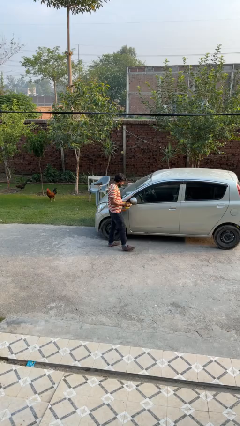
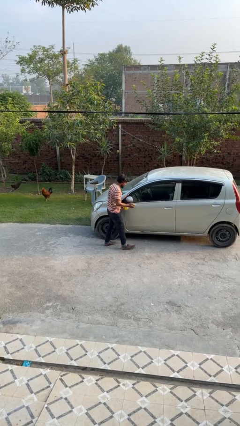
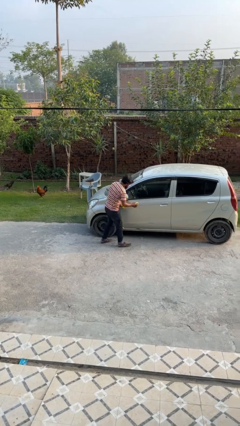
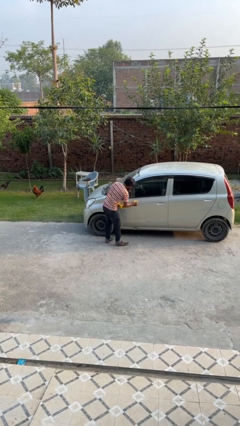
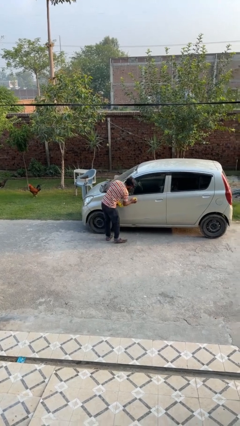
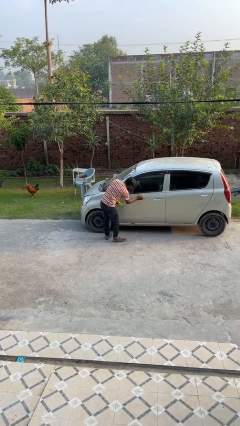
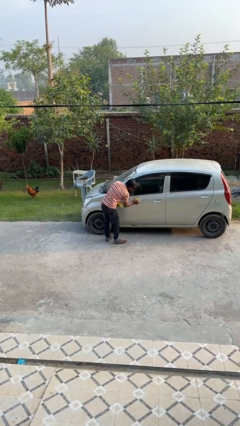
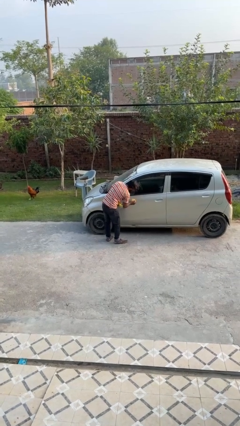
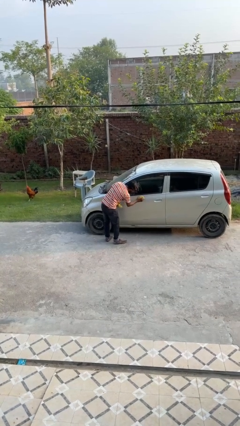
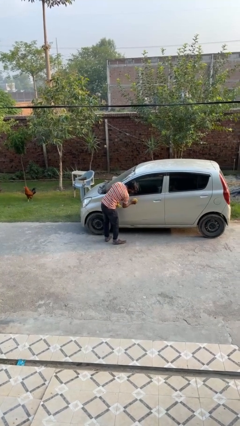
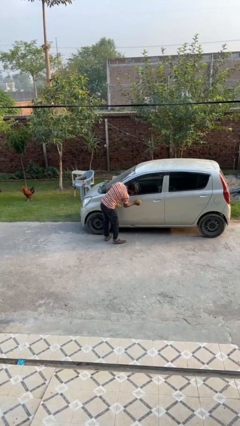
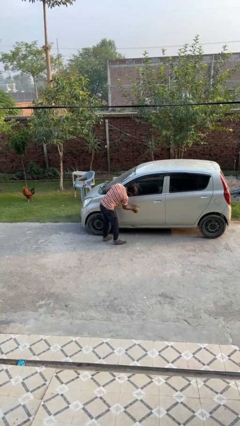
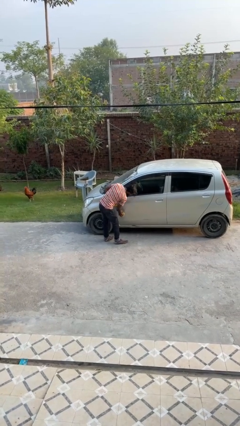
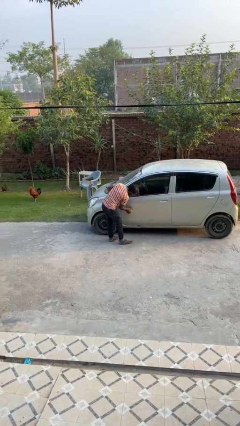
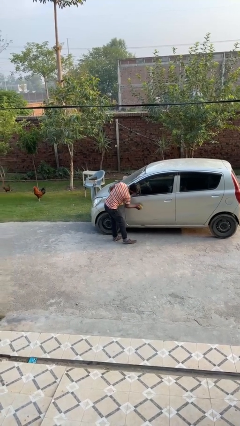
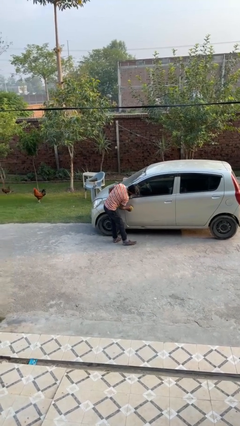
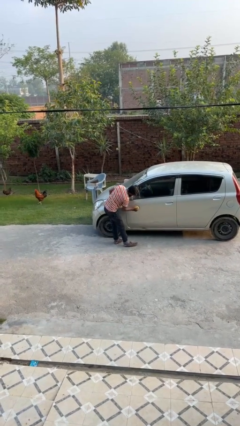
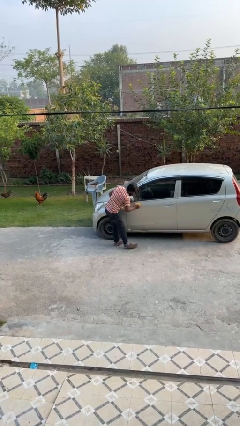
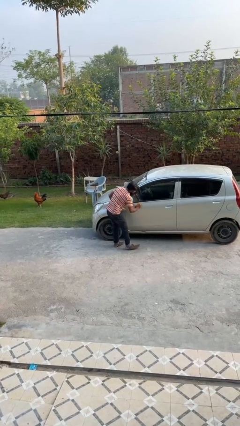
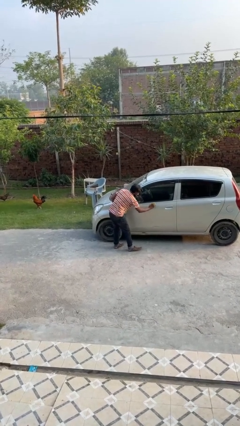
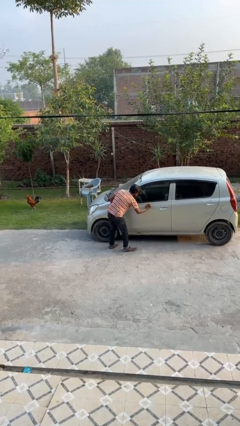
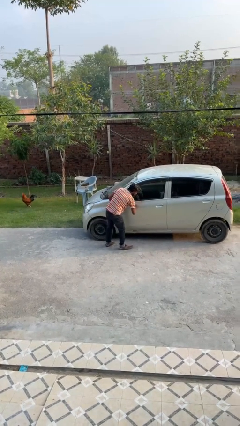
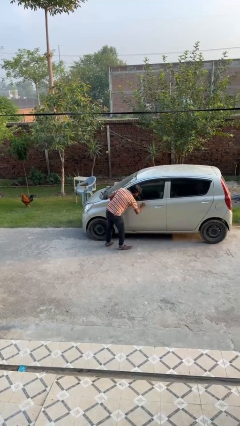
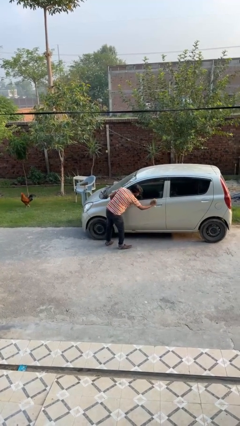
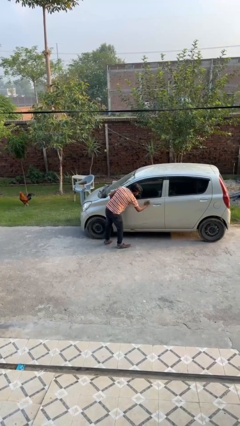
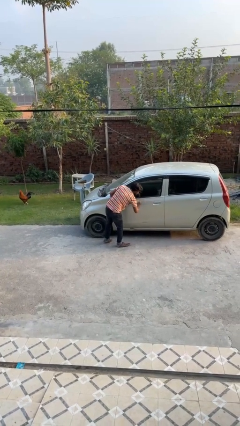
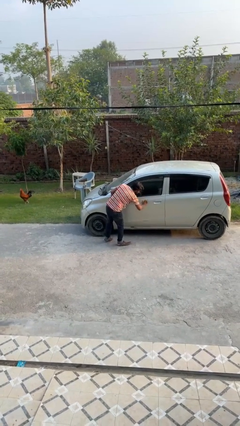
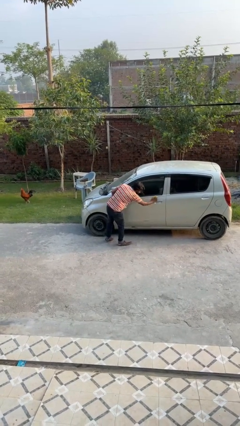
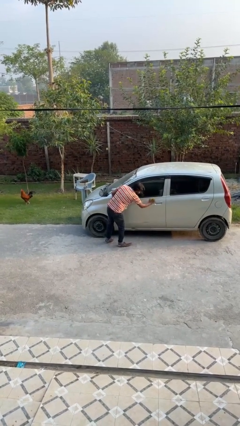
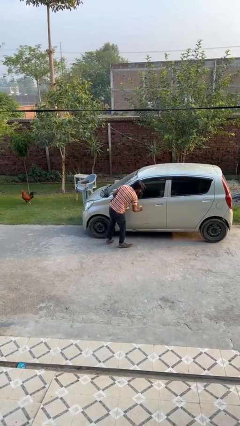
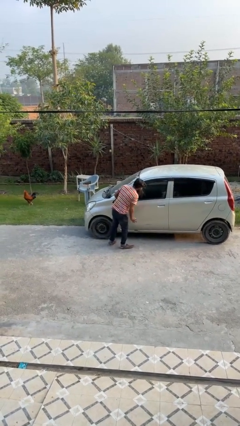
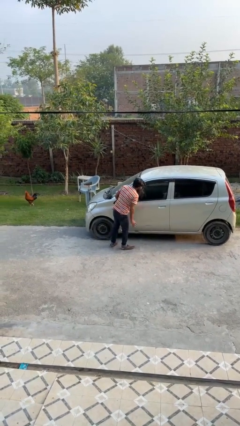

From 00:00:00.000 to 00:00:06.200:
person polishes car with rag

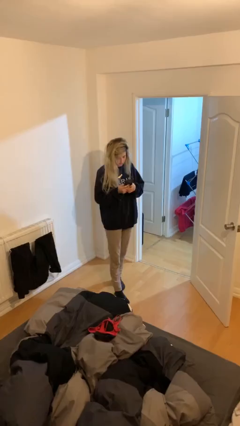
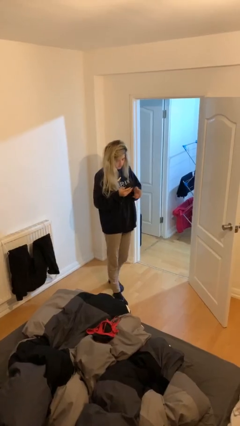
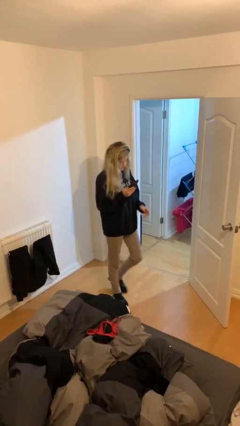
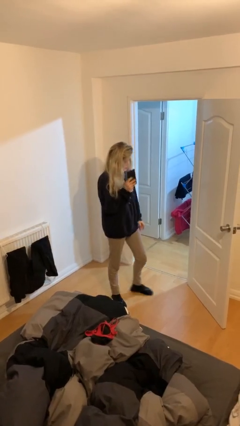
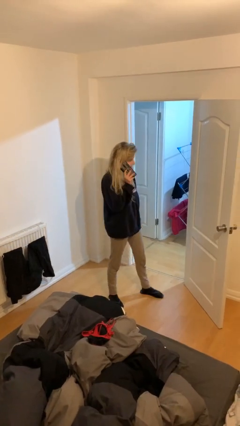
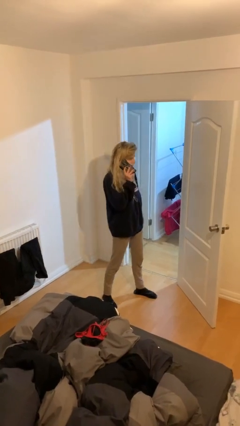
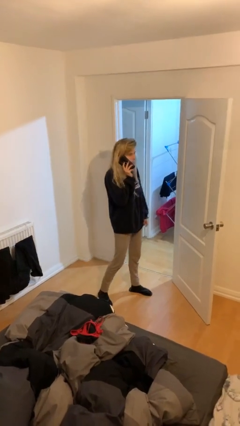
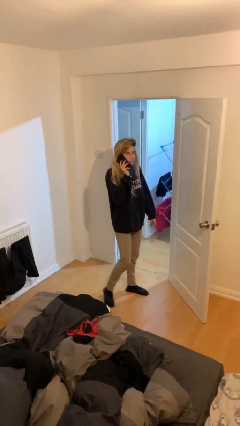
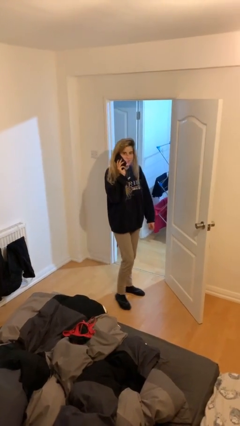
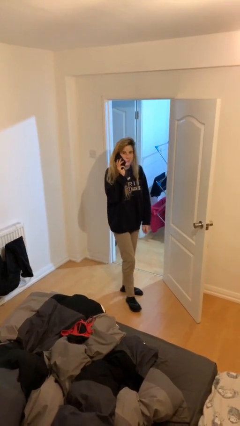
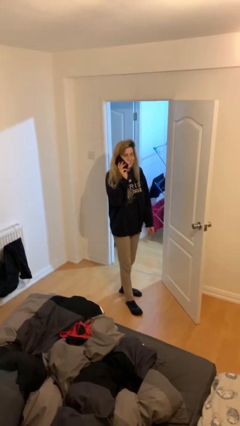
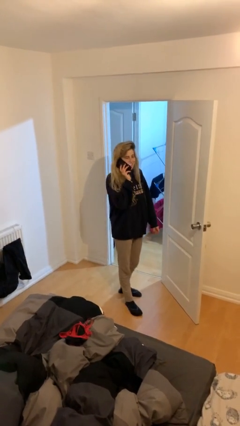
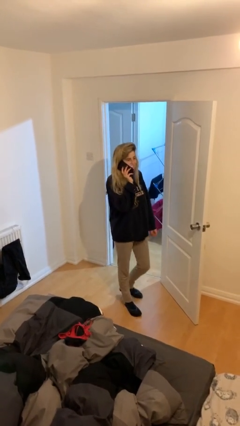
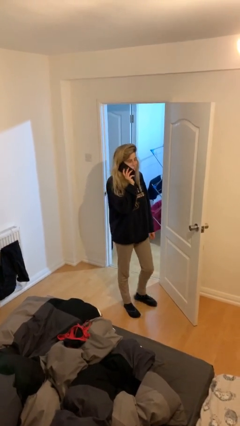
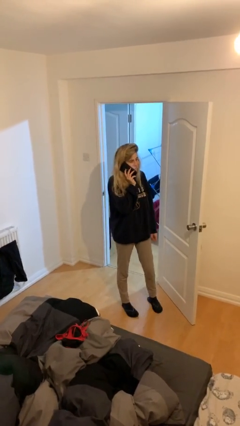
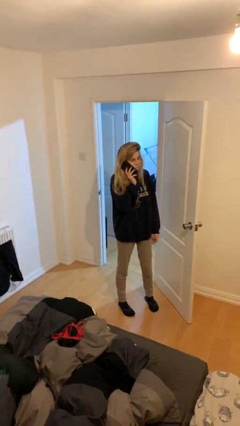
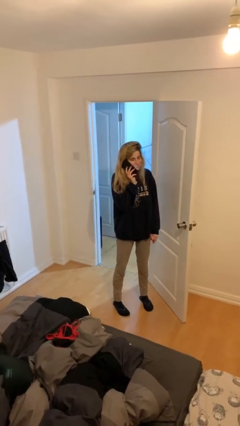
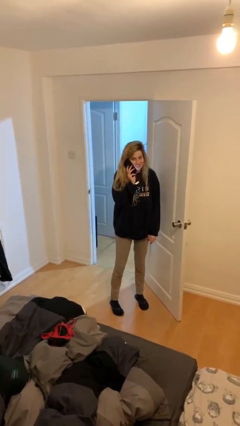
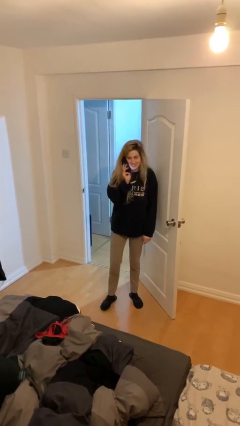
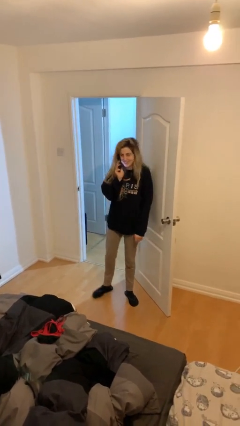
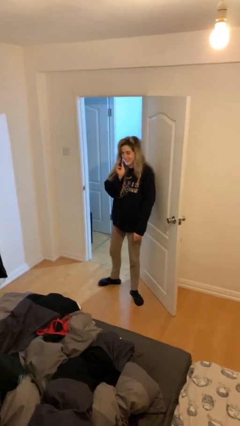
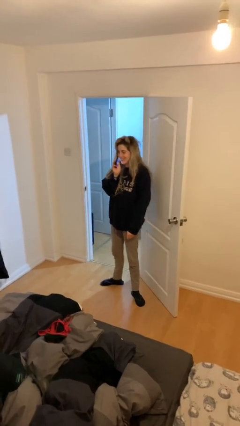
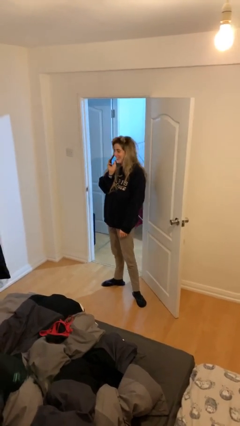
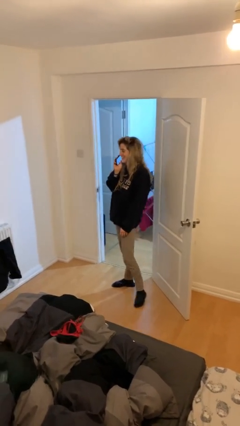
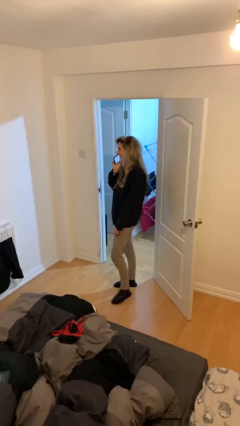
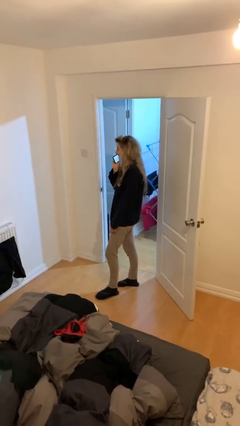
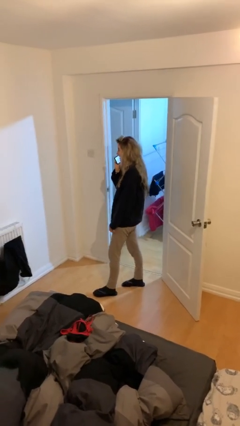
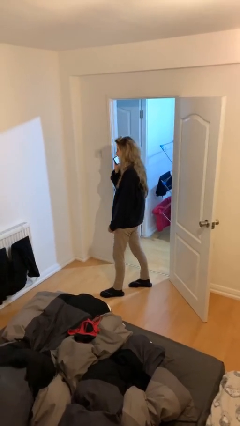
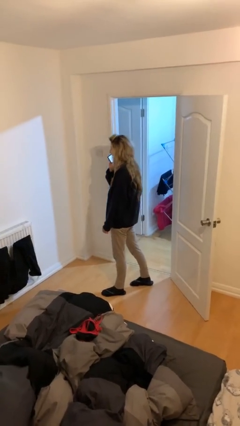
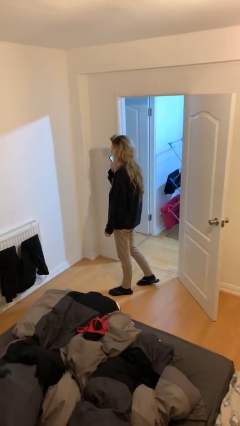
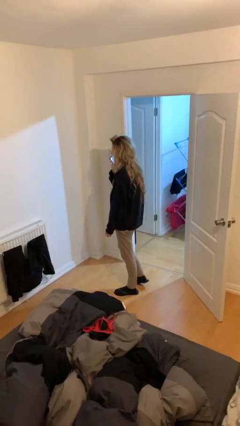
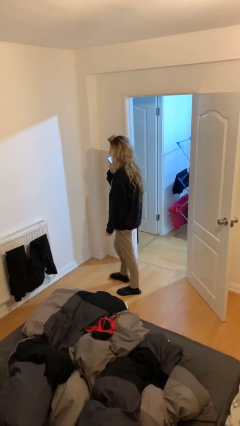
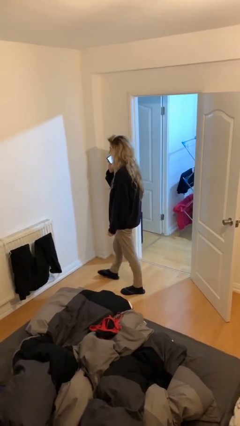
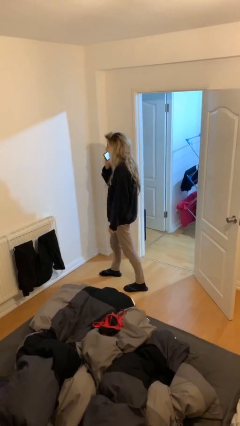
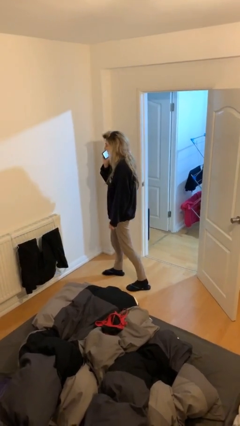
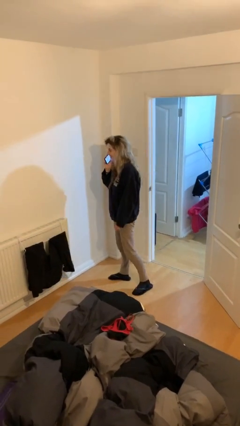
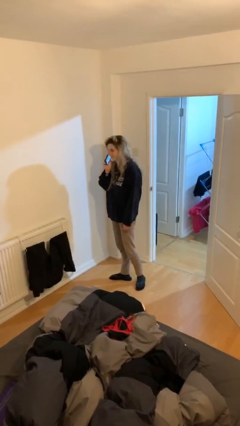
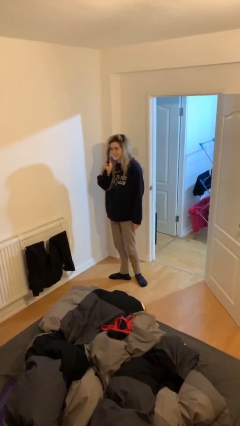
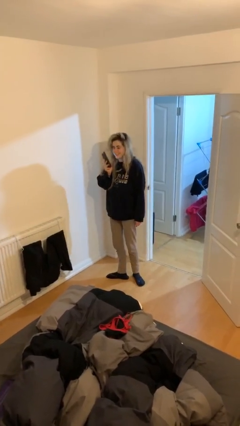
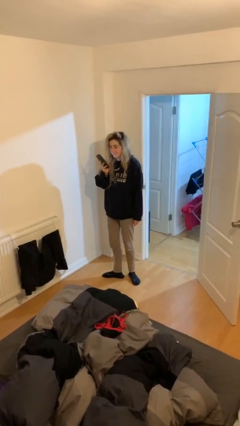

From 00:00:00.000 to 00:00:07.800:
person talks on phone

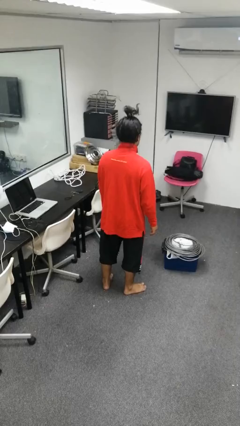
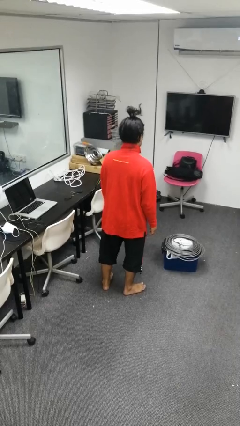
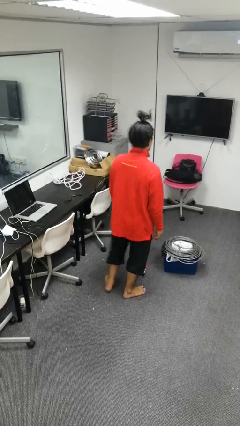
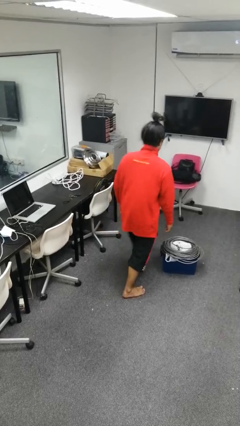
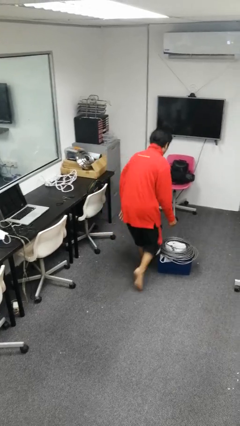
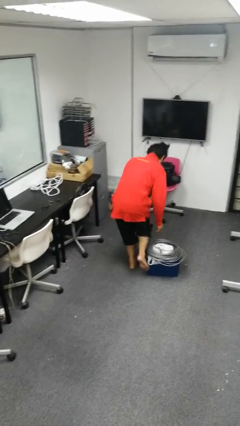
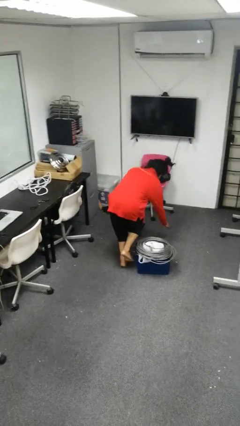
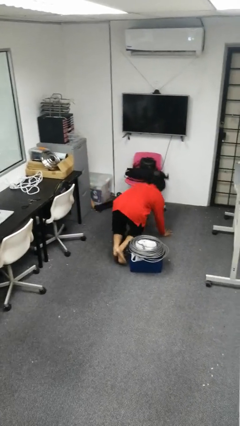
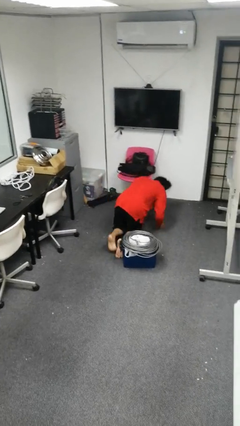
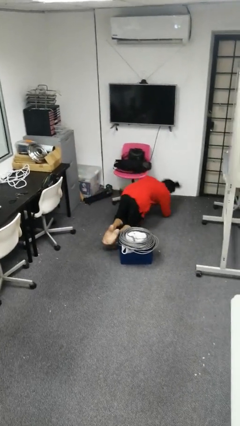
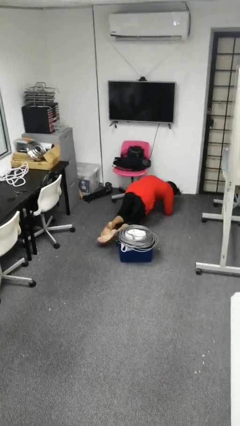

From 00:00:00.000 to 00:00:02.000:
person trips on object on floor

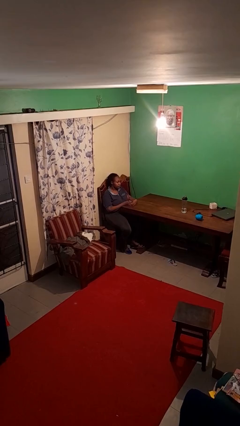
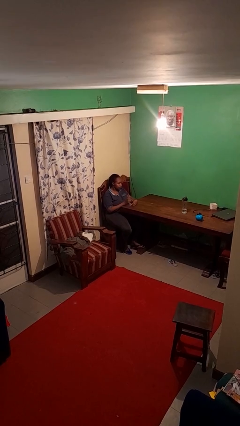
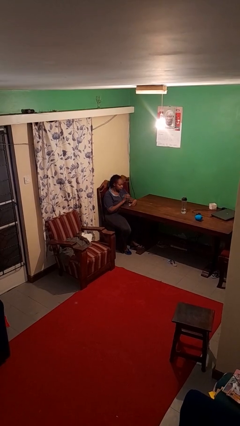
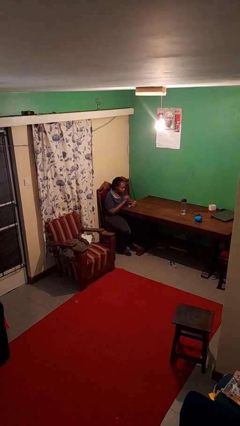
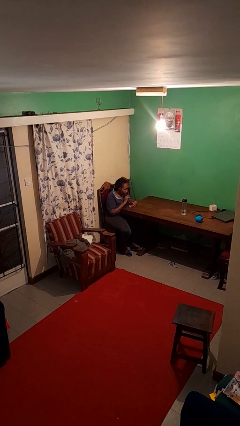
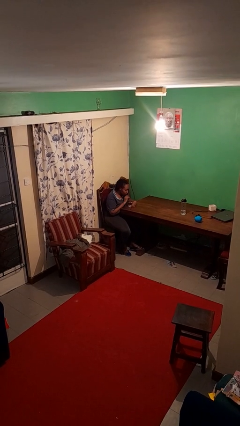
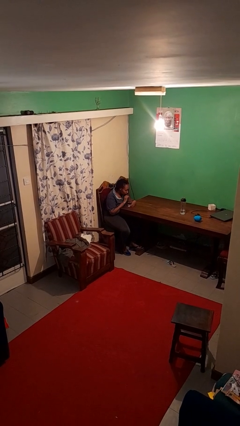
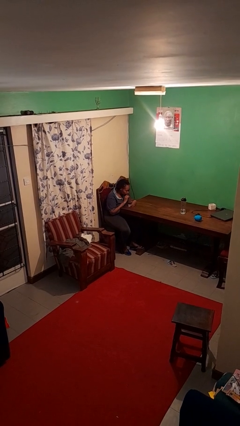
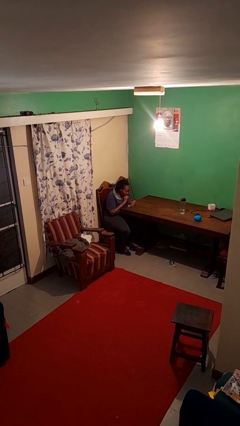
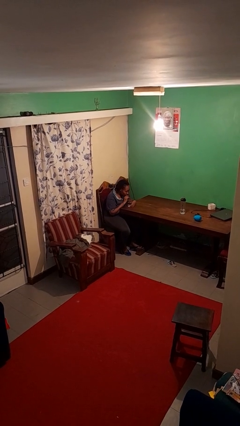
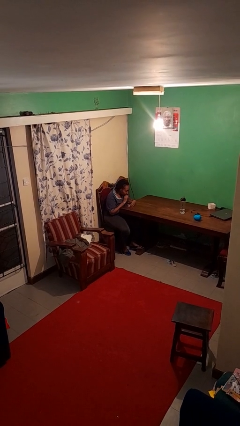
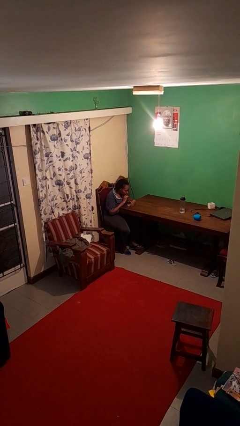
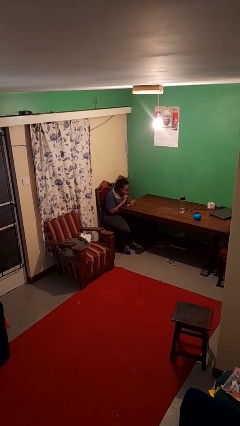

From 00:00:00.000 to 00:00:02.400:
person drinks from straw
